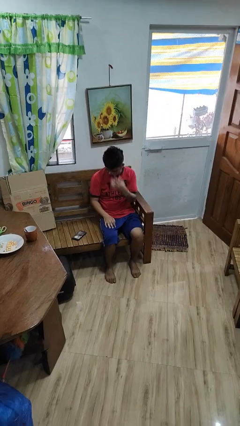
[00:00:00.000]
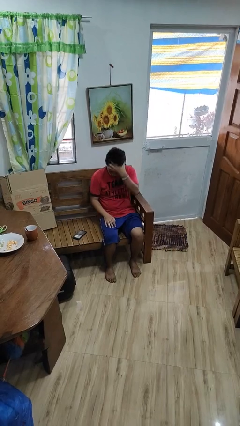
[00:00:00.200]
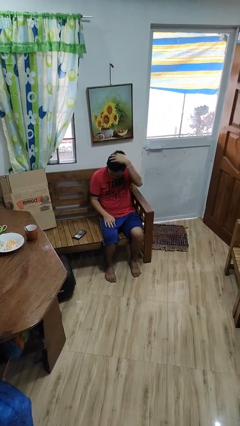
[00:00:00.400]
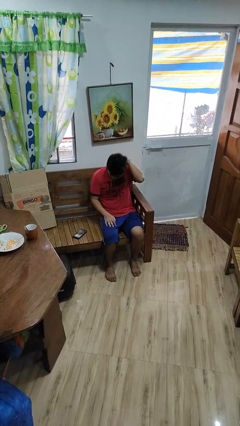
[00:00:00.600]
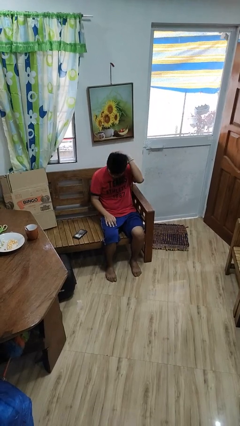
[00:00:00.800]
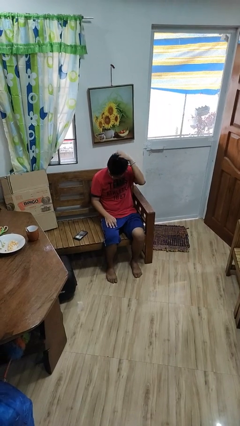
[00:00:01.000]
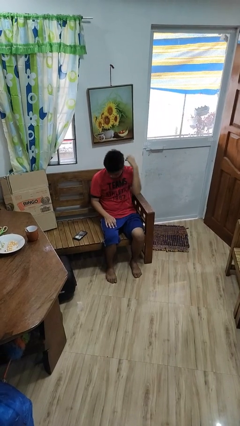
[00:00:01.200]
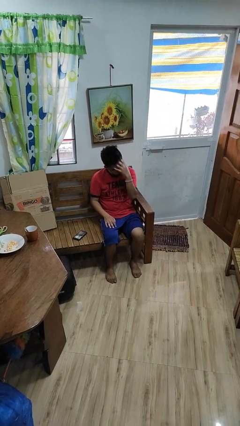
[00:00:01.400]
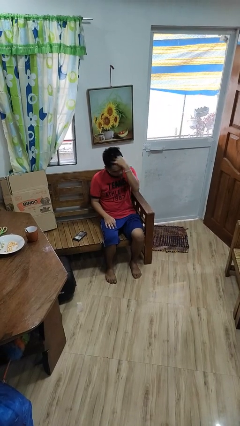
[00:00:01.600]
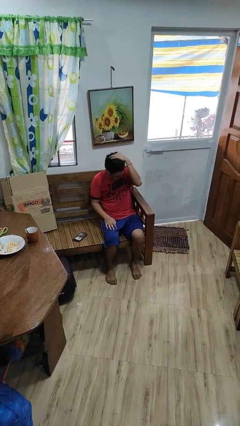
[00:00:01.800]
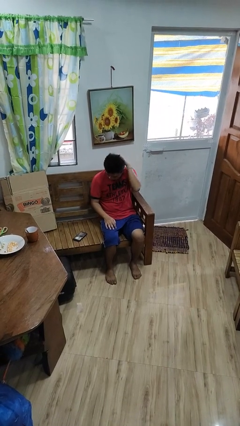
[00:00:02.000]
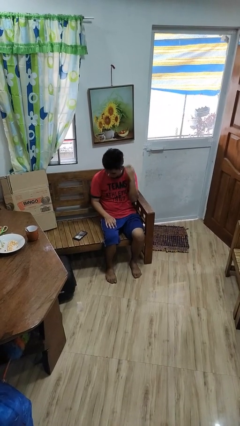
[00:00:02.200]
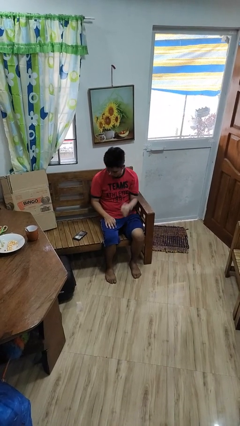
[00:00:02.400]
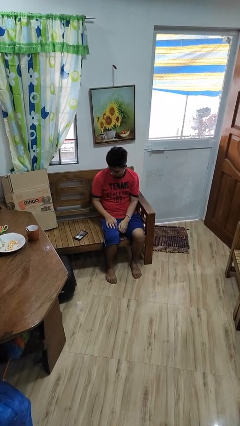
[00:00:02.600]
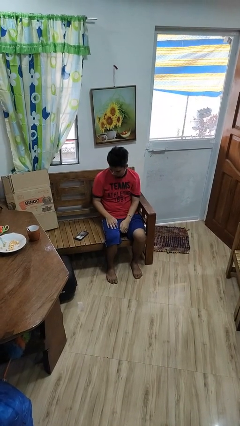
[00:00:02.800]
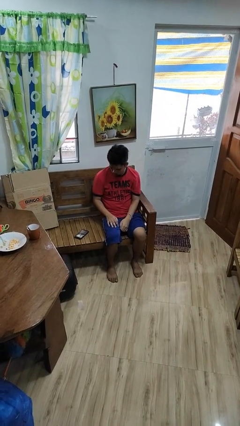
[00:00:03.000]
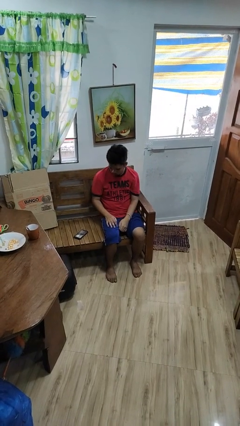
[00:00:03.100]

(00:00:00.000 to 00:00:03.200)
person strokes hair

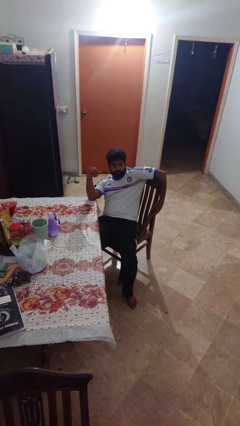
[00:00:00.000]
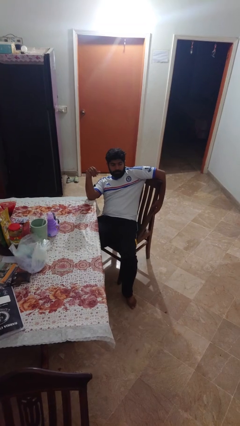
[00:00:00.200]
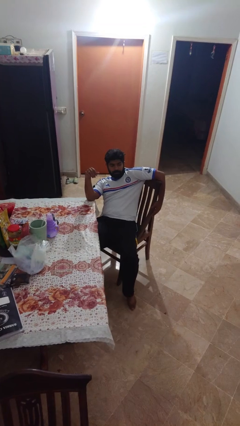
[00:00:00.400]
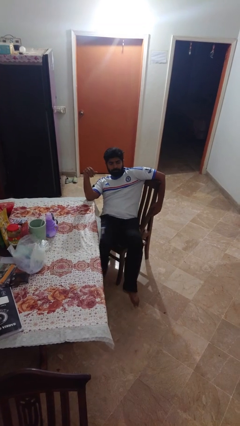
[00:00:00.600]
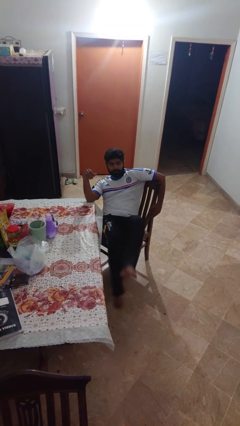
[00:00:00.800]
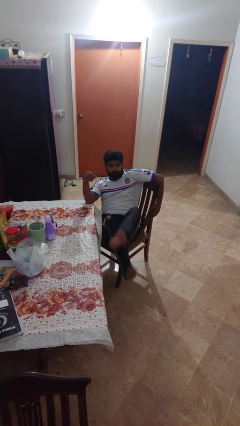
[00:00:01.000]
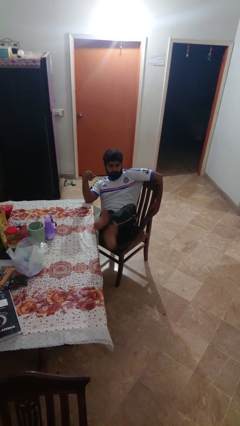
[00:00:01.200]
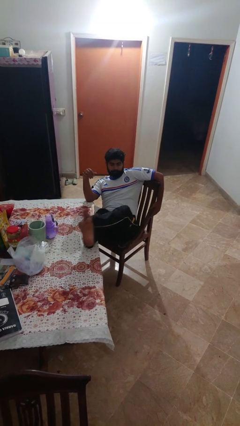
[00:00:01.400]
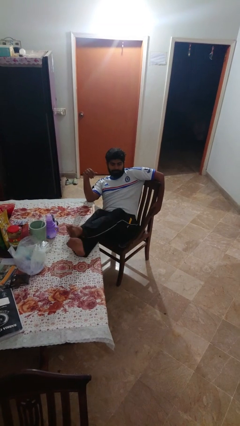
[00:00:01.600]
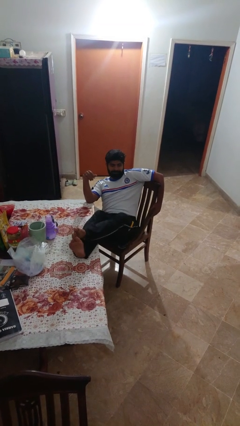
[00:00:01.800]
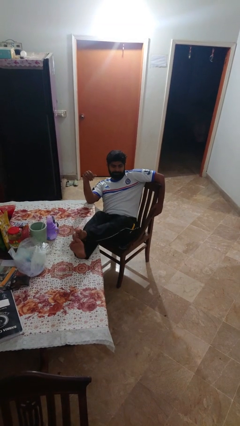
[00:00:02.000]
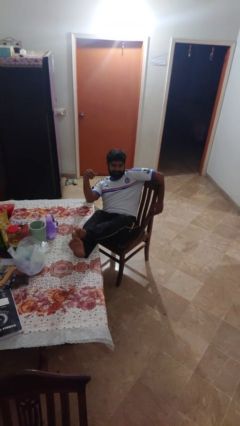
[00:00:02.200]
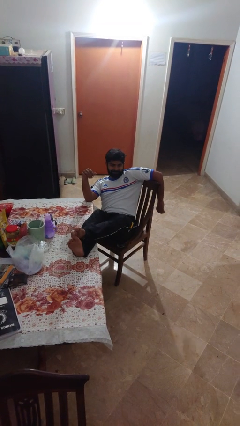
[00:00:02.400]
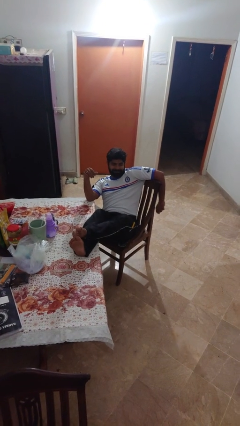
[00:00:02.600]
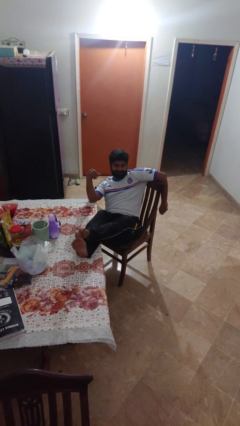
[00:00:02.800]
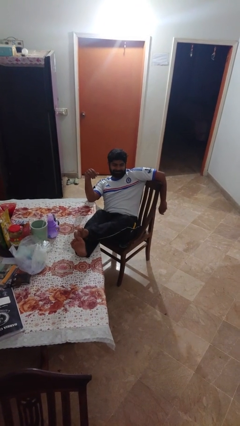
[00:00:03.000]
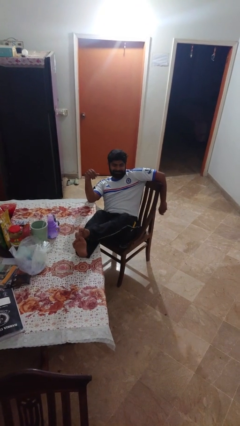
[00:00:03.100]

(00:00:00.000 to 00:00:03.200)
person puts feet up

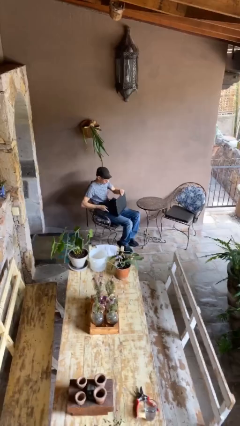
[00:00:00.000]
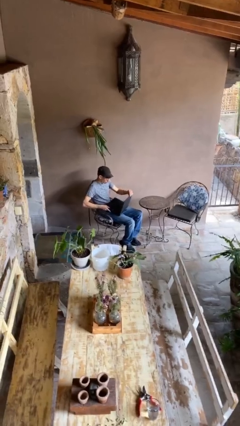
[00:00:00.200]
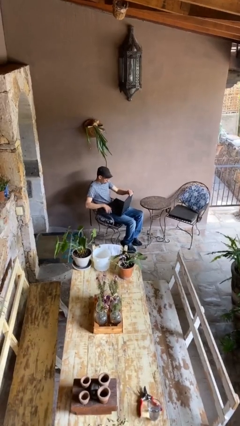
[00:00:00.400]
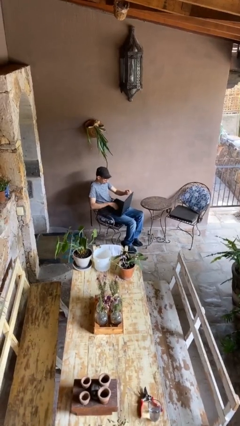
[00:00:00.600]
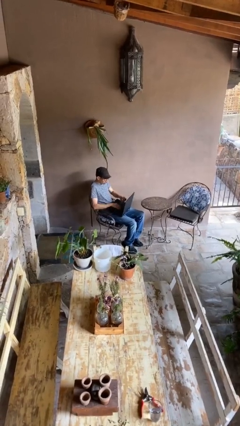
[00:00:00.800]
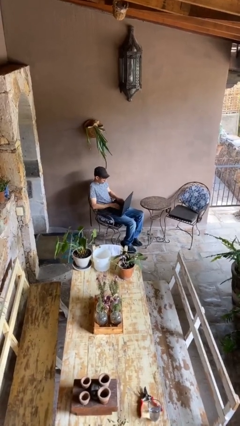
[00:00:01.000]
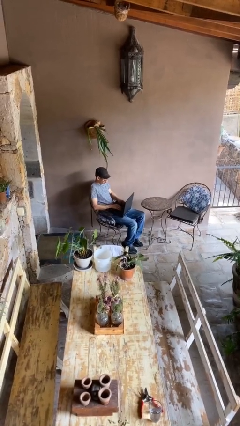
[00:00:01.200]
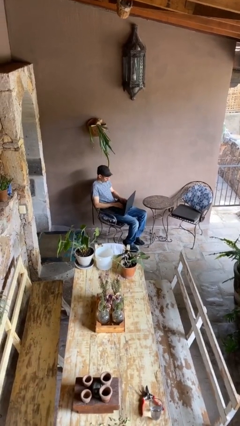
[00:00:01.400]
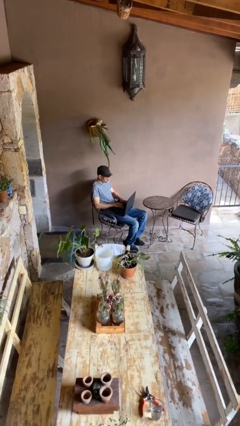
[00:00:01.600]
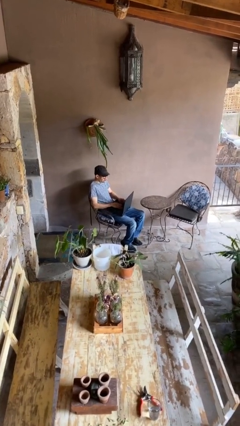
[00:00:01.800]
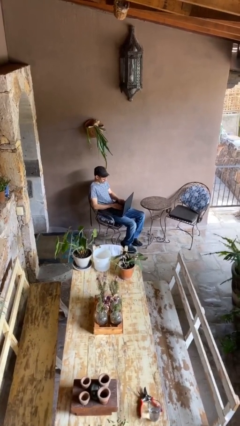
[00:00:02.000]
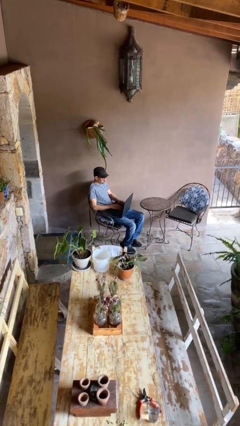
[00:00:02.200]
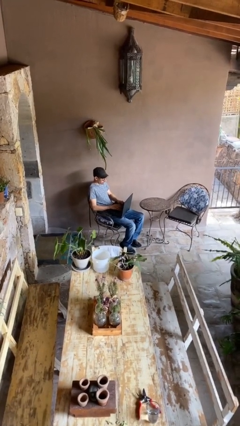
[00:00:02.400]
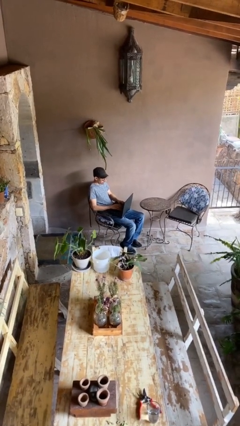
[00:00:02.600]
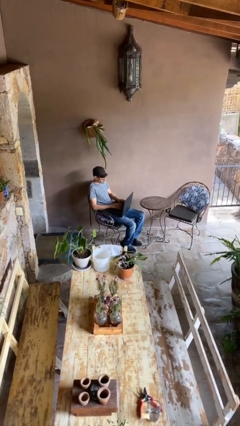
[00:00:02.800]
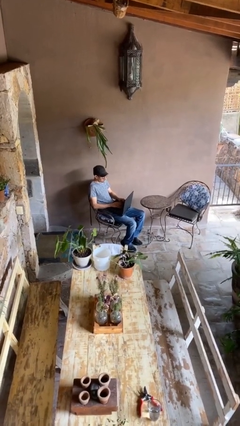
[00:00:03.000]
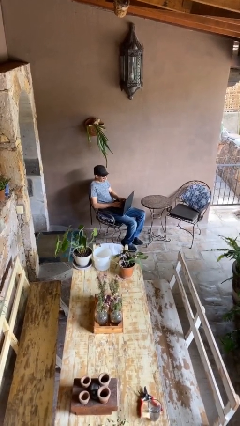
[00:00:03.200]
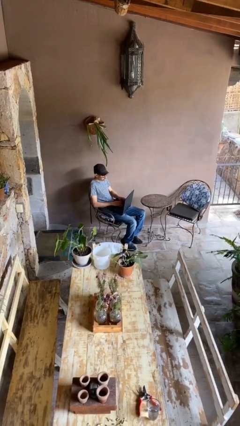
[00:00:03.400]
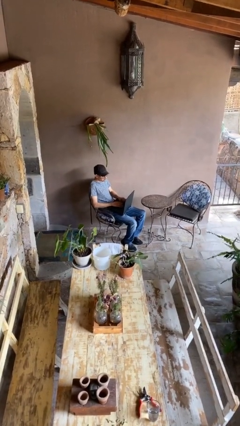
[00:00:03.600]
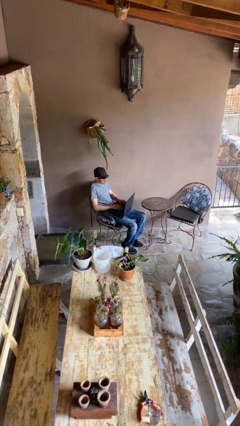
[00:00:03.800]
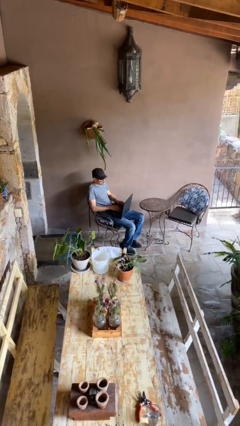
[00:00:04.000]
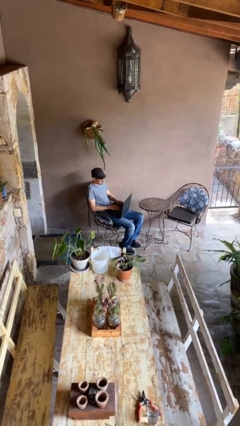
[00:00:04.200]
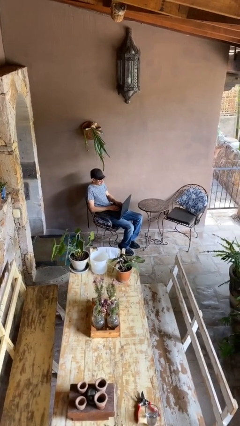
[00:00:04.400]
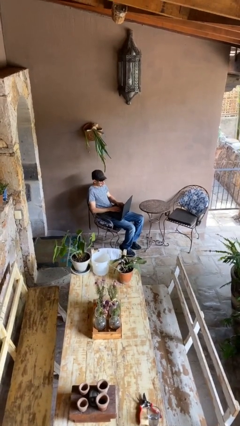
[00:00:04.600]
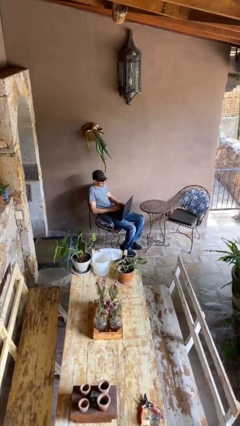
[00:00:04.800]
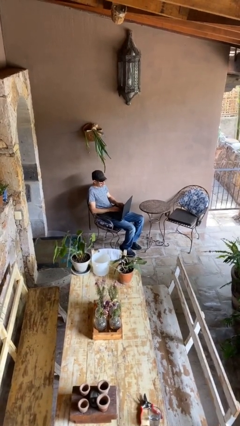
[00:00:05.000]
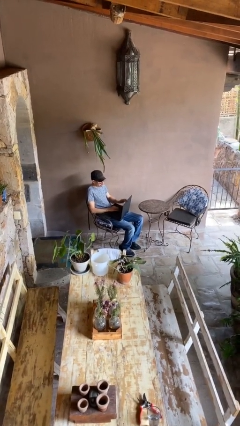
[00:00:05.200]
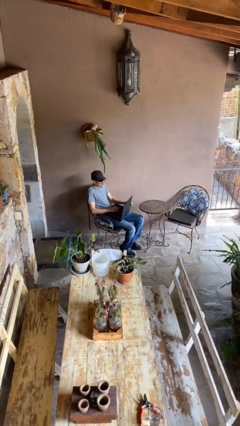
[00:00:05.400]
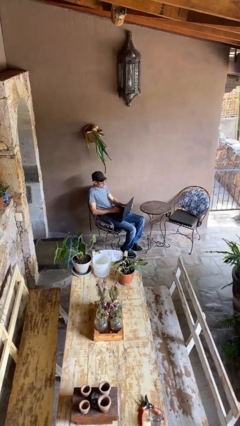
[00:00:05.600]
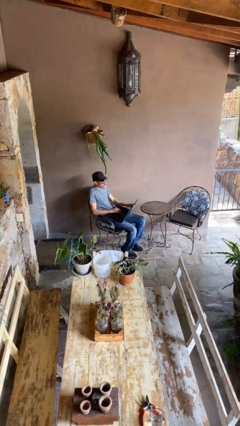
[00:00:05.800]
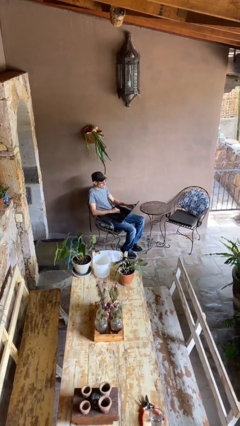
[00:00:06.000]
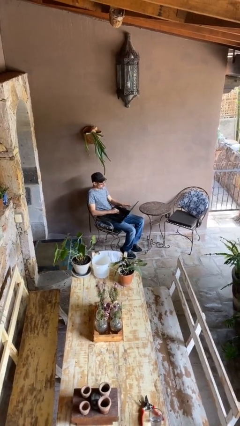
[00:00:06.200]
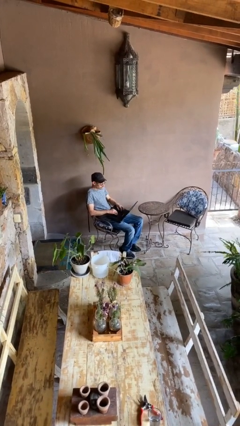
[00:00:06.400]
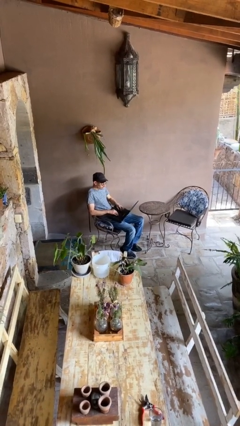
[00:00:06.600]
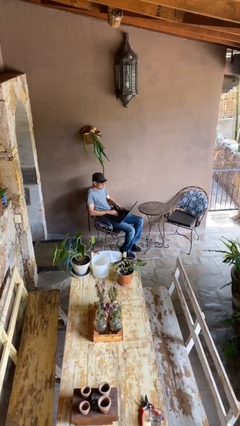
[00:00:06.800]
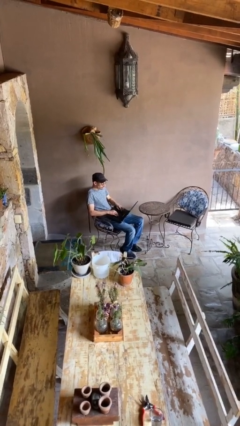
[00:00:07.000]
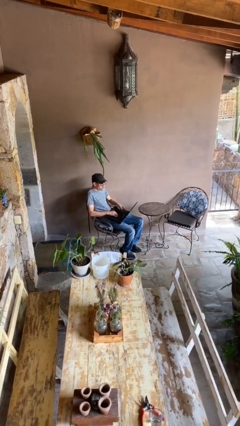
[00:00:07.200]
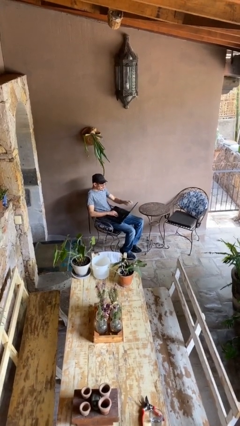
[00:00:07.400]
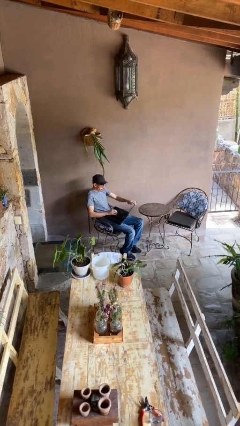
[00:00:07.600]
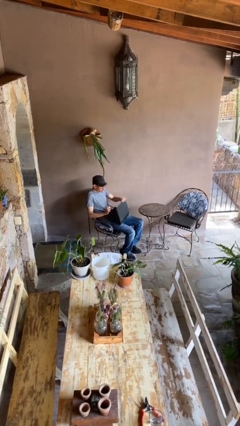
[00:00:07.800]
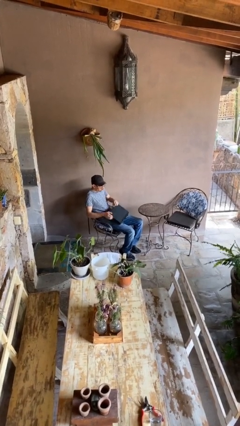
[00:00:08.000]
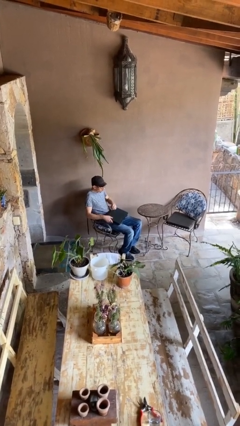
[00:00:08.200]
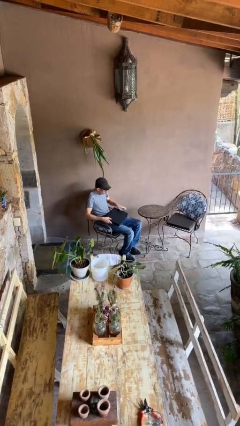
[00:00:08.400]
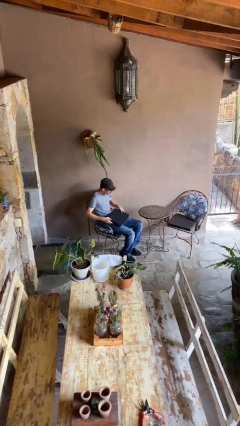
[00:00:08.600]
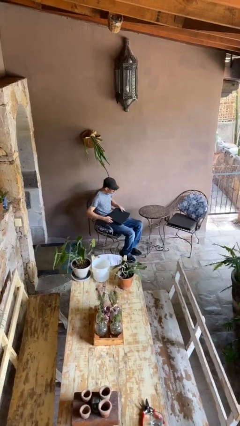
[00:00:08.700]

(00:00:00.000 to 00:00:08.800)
person interacts with laptop

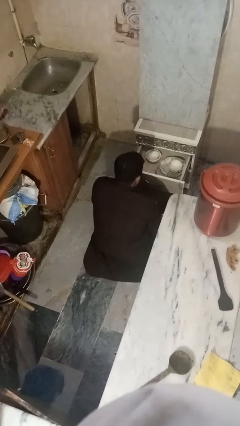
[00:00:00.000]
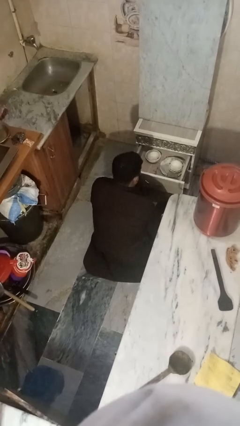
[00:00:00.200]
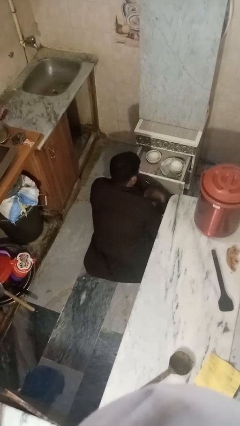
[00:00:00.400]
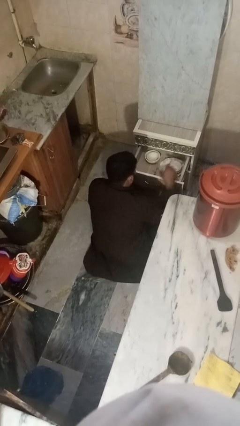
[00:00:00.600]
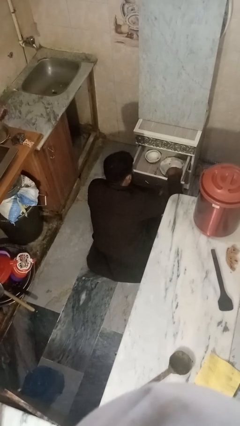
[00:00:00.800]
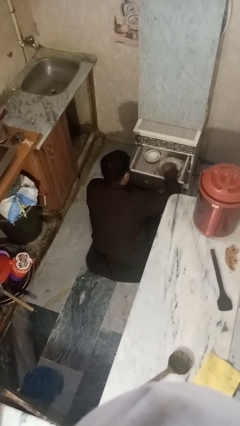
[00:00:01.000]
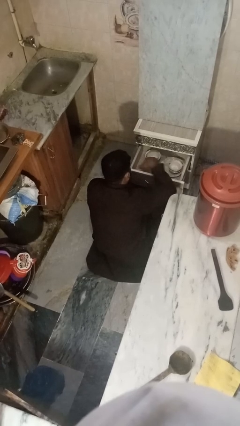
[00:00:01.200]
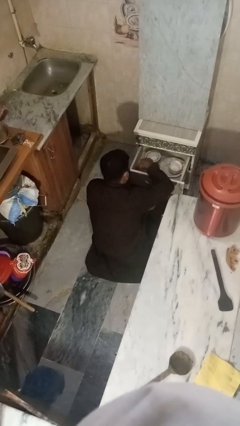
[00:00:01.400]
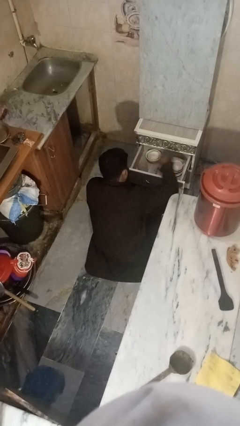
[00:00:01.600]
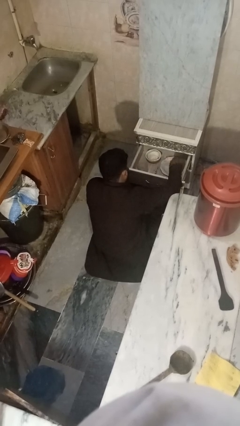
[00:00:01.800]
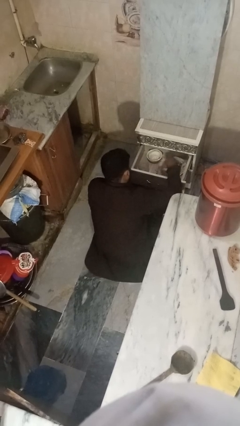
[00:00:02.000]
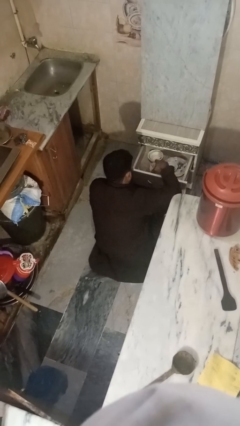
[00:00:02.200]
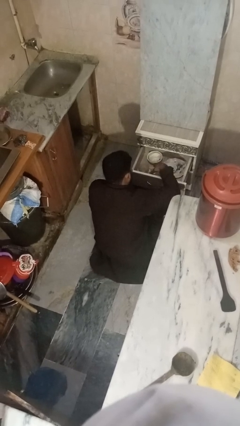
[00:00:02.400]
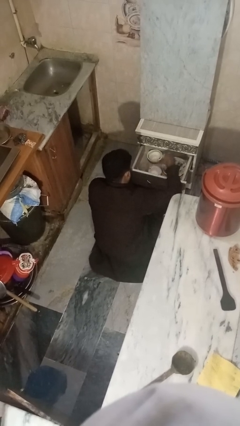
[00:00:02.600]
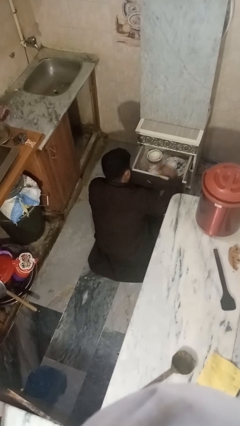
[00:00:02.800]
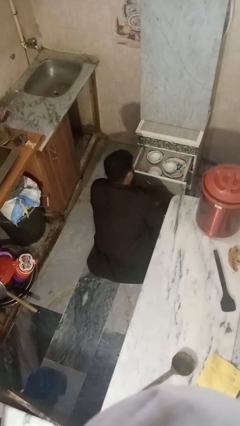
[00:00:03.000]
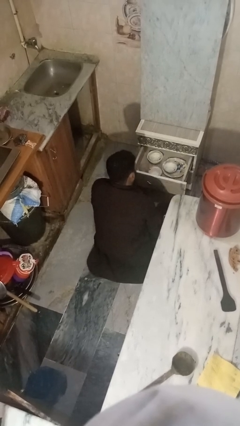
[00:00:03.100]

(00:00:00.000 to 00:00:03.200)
person searches in kitchen drawer
